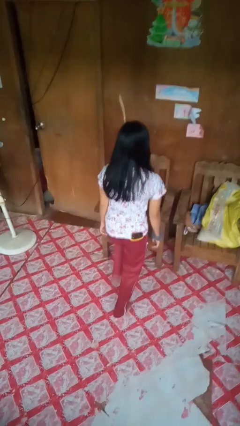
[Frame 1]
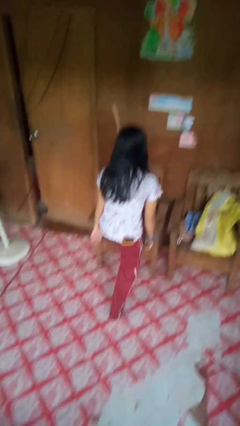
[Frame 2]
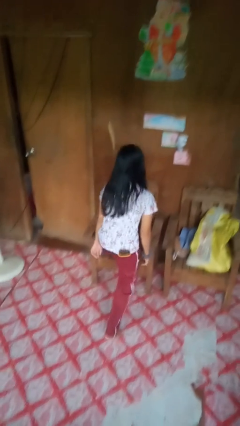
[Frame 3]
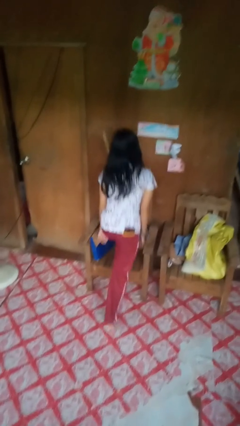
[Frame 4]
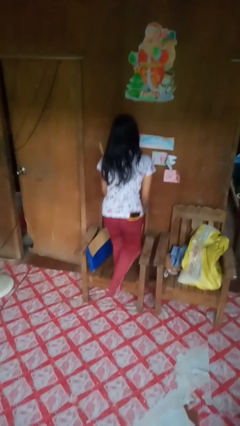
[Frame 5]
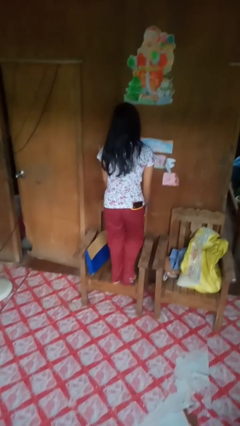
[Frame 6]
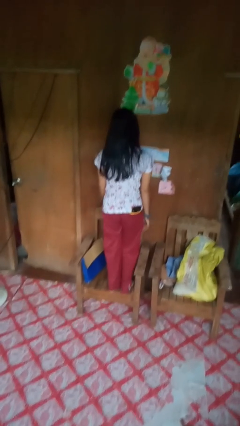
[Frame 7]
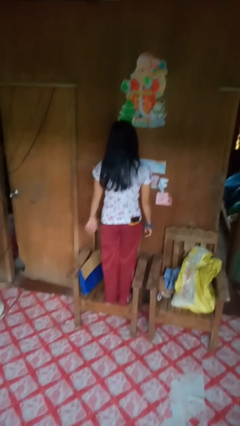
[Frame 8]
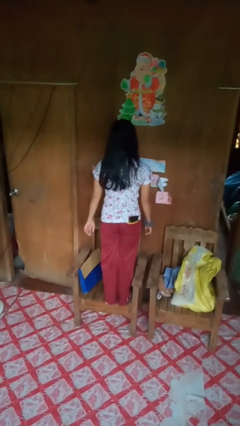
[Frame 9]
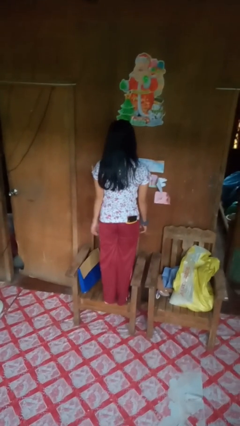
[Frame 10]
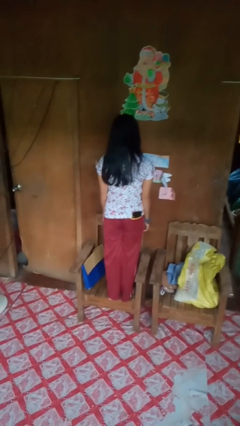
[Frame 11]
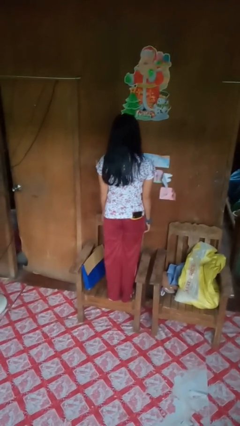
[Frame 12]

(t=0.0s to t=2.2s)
person climbs on chair

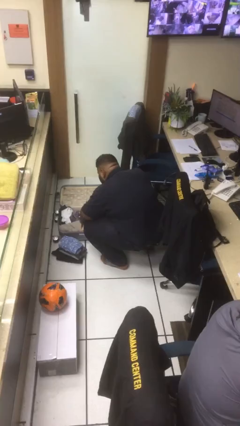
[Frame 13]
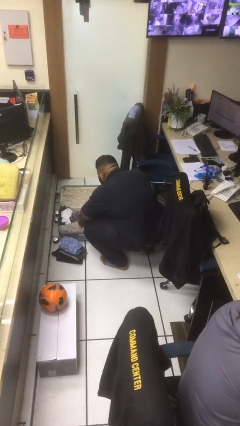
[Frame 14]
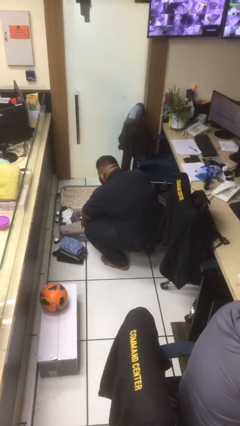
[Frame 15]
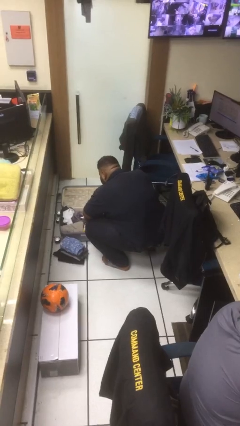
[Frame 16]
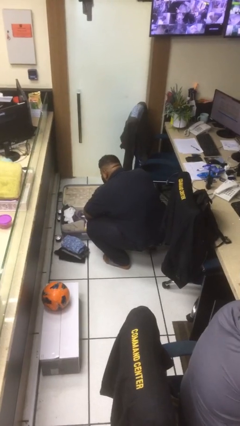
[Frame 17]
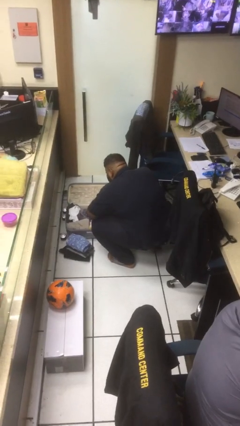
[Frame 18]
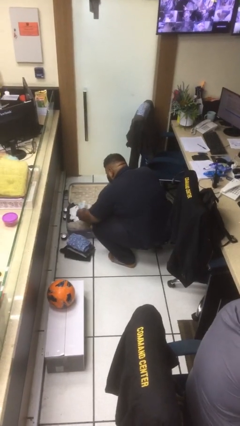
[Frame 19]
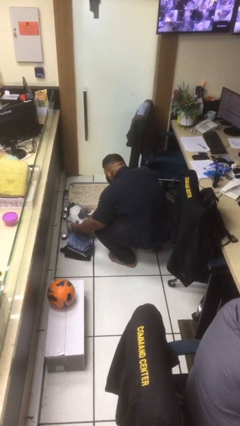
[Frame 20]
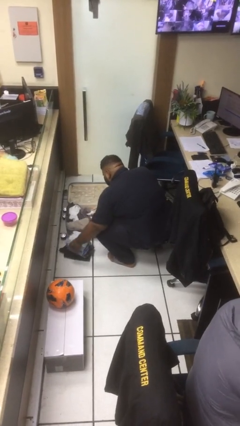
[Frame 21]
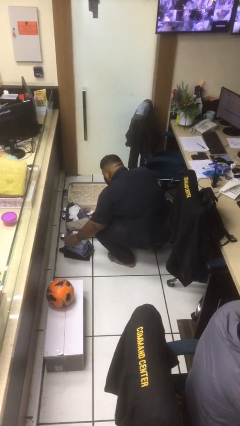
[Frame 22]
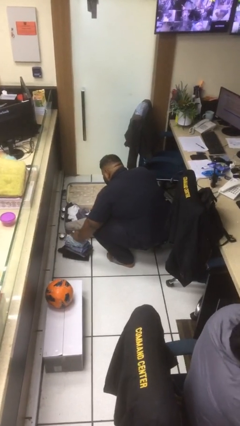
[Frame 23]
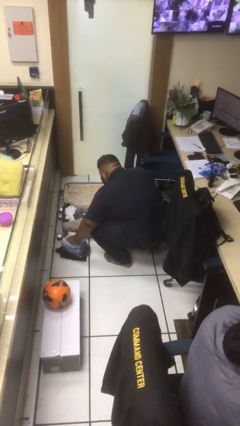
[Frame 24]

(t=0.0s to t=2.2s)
person unloads clothes from suitcase

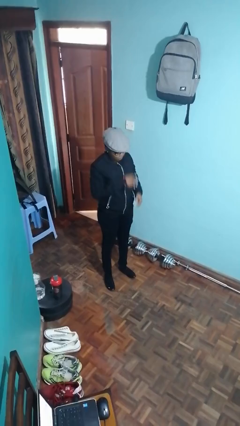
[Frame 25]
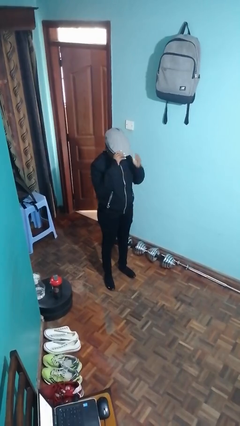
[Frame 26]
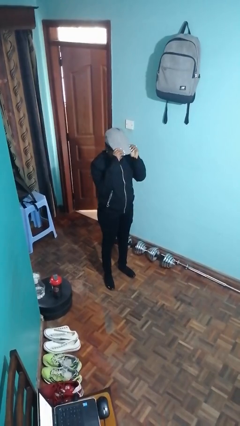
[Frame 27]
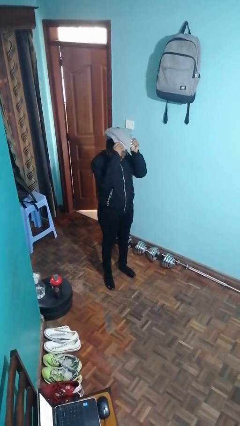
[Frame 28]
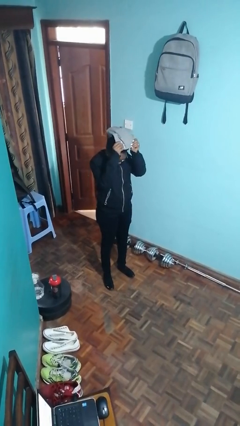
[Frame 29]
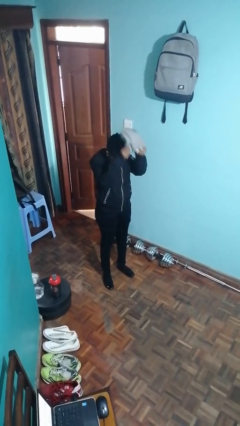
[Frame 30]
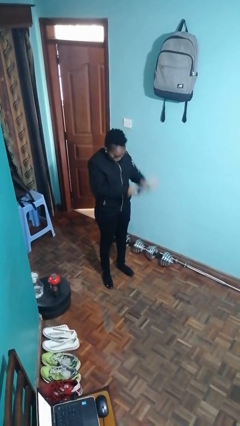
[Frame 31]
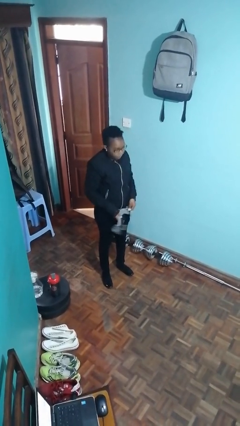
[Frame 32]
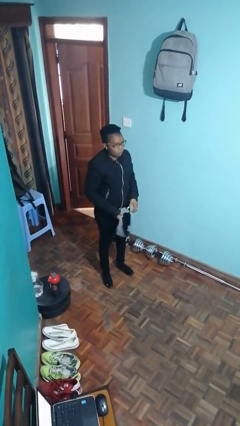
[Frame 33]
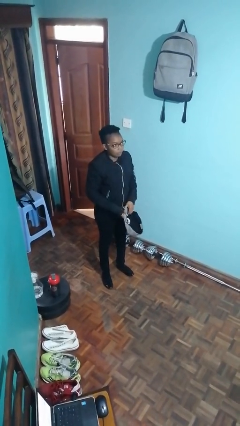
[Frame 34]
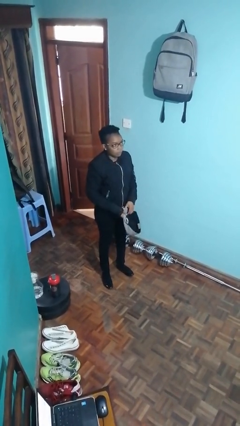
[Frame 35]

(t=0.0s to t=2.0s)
person takes off hat

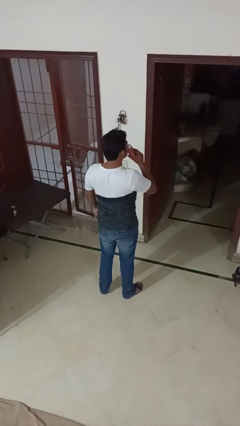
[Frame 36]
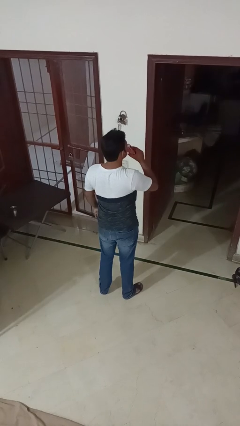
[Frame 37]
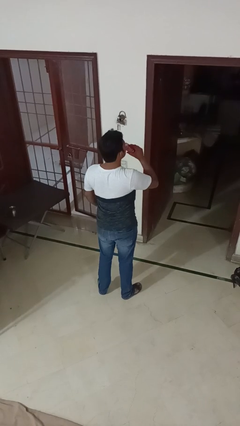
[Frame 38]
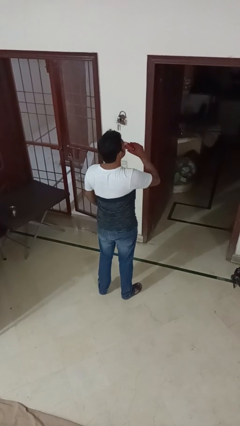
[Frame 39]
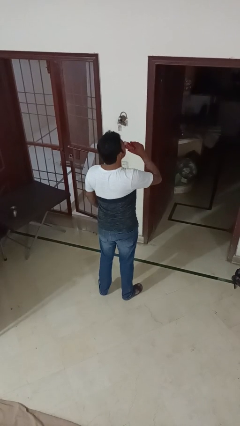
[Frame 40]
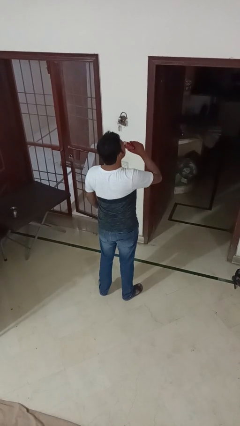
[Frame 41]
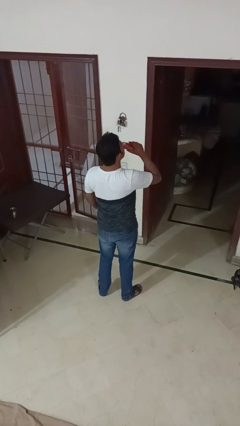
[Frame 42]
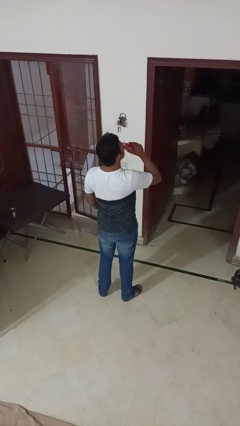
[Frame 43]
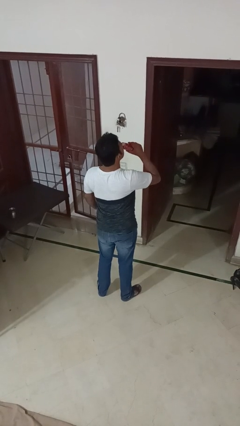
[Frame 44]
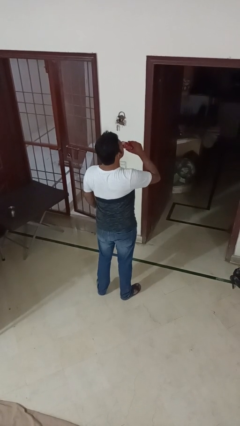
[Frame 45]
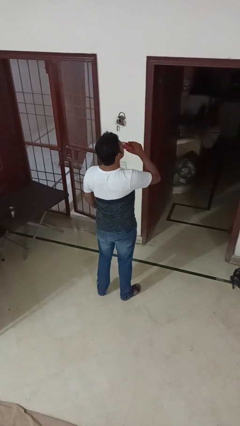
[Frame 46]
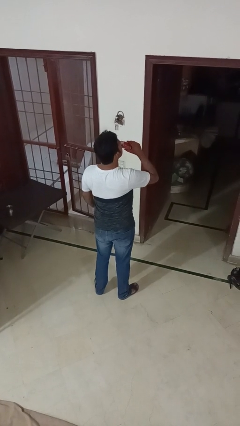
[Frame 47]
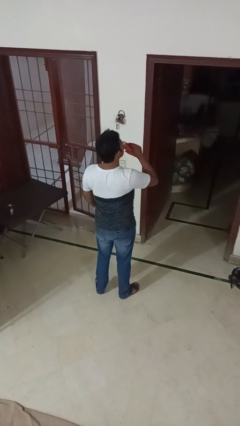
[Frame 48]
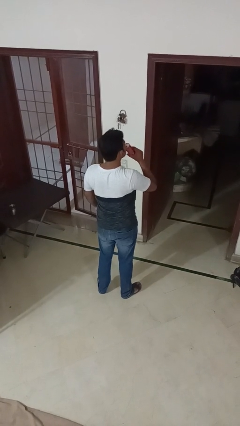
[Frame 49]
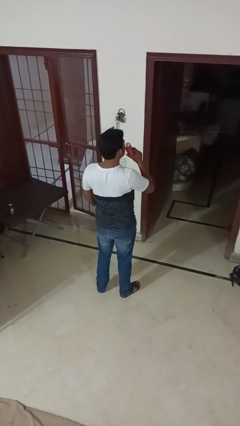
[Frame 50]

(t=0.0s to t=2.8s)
person drinks from beverage can

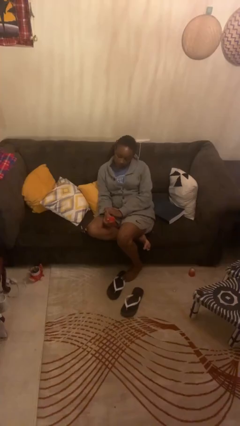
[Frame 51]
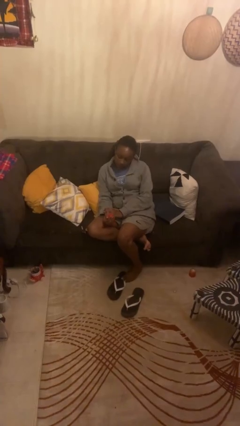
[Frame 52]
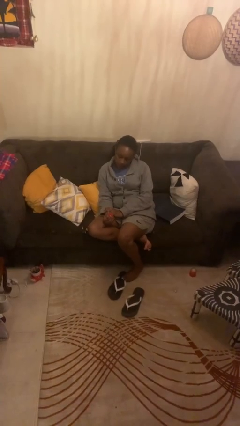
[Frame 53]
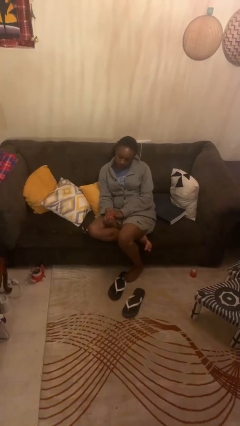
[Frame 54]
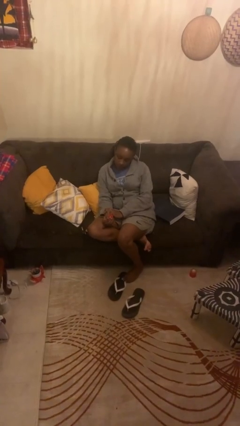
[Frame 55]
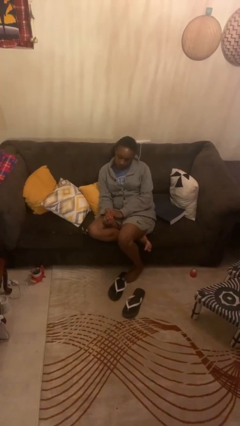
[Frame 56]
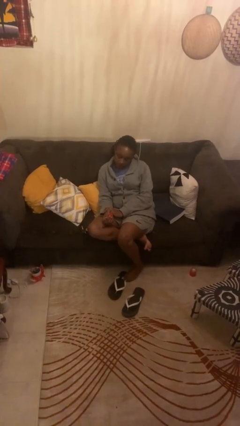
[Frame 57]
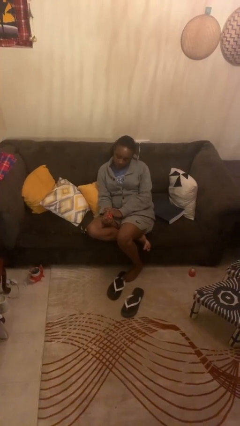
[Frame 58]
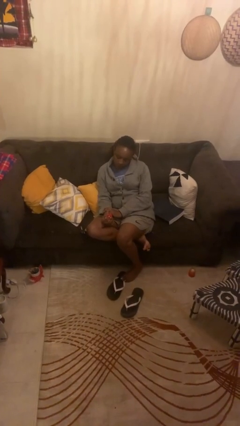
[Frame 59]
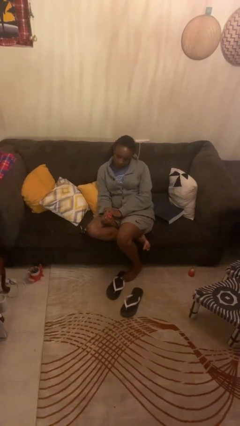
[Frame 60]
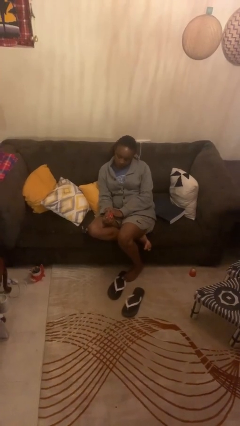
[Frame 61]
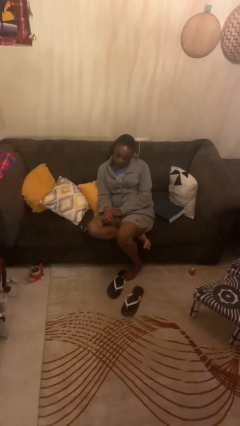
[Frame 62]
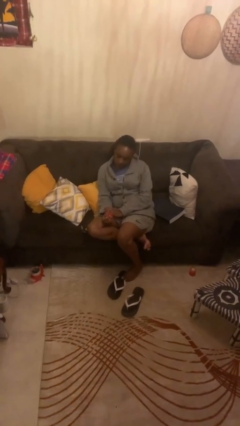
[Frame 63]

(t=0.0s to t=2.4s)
person squeezes object

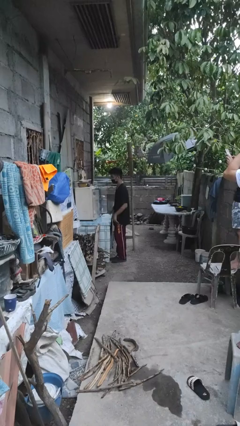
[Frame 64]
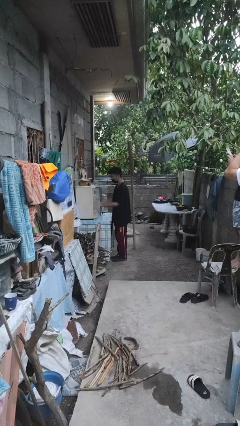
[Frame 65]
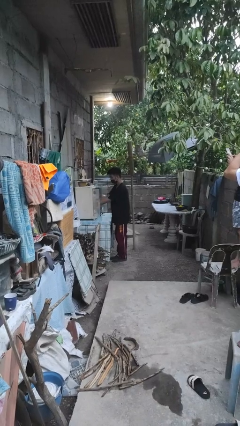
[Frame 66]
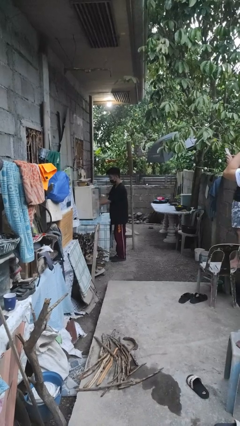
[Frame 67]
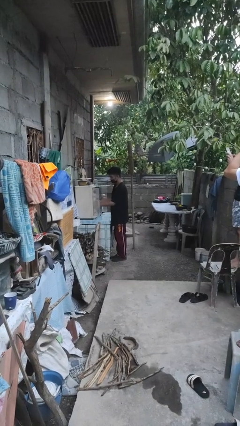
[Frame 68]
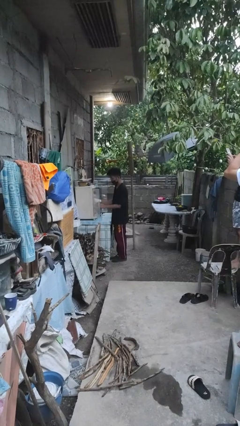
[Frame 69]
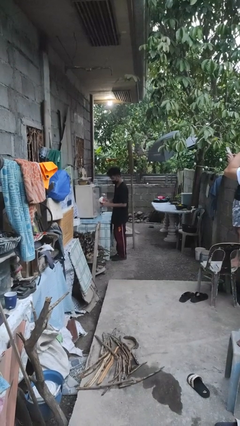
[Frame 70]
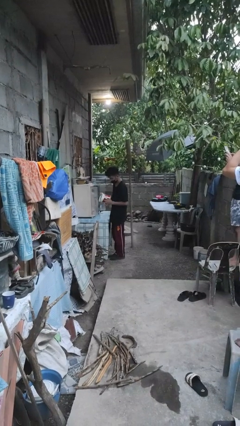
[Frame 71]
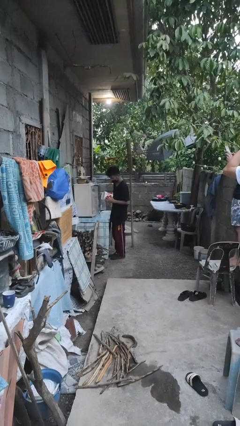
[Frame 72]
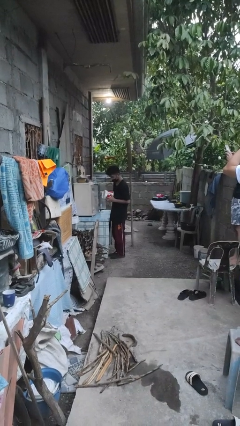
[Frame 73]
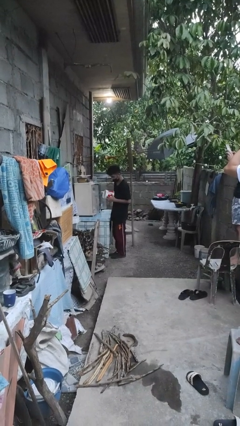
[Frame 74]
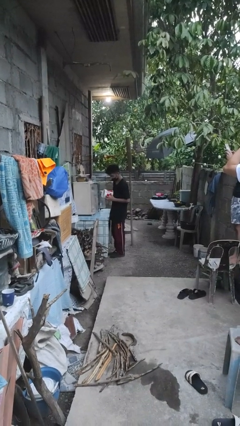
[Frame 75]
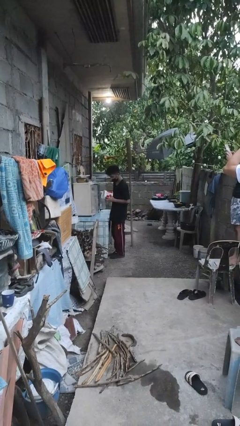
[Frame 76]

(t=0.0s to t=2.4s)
person picks up object from cabinet

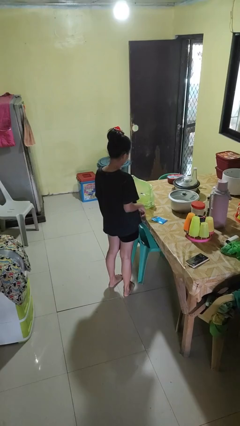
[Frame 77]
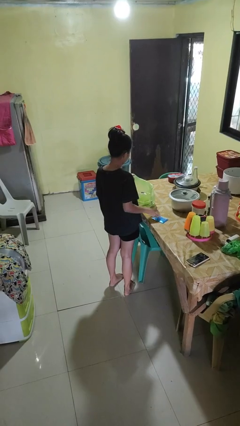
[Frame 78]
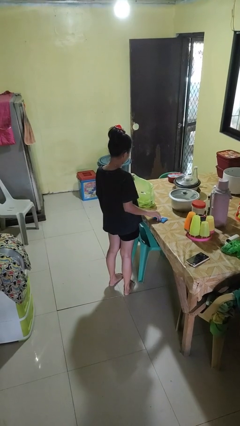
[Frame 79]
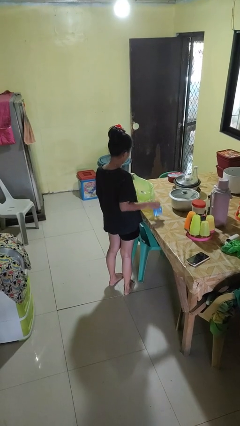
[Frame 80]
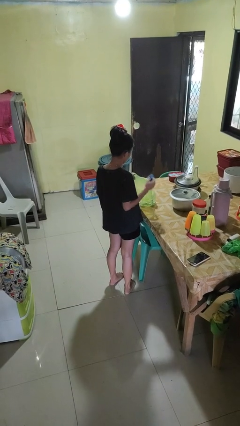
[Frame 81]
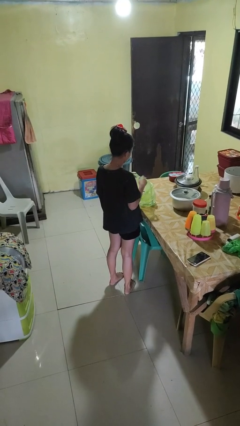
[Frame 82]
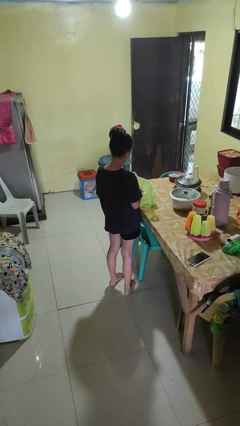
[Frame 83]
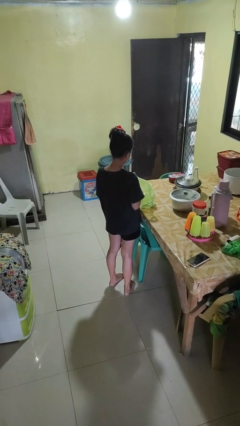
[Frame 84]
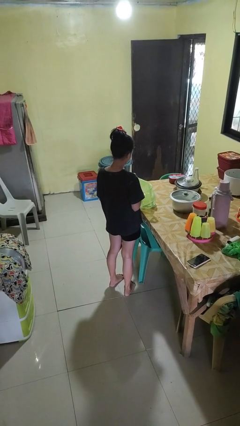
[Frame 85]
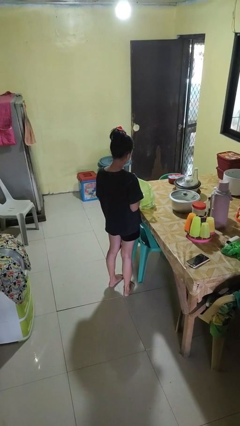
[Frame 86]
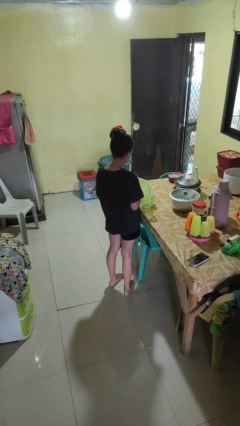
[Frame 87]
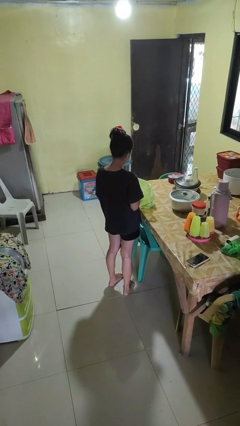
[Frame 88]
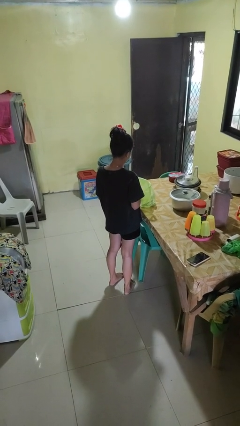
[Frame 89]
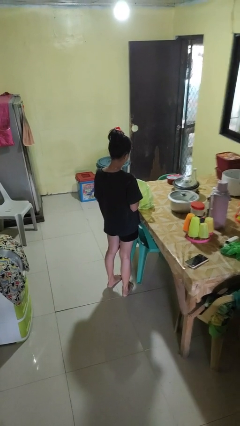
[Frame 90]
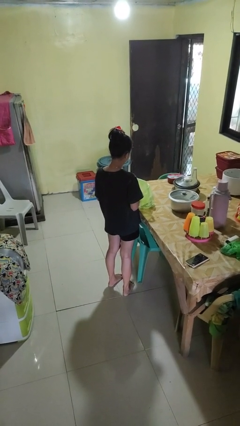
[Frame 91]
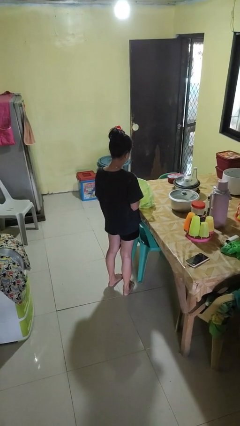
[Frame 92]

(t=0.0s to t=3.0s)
person puts object into bag
